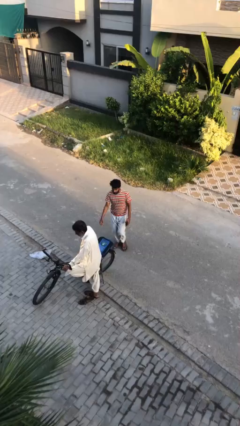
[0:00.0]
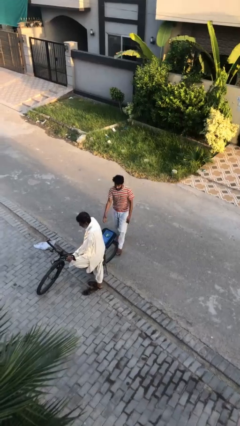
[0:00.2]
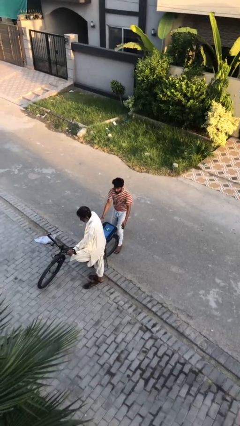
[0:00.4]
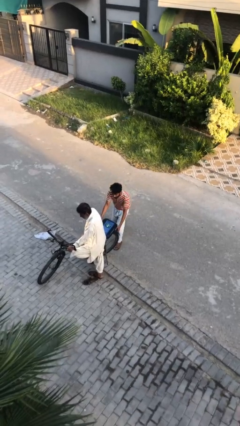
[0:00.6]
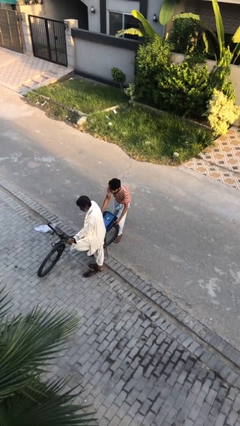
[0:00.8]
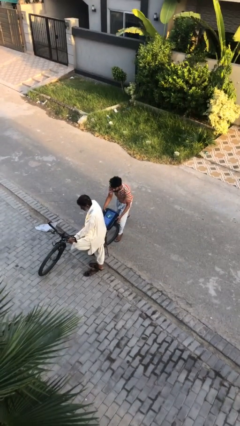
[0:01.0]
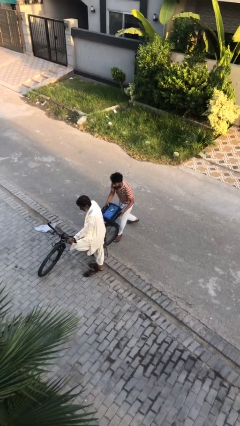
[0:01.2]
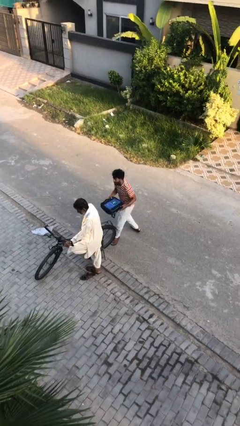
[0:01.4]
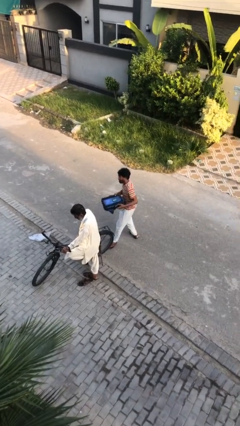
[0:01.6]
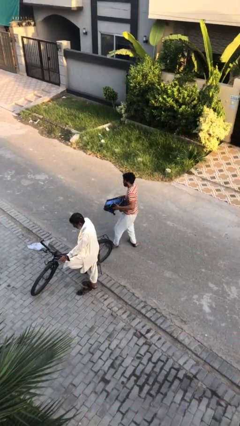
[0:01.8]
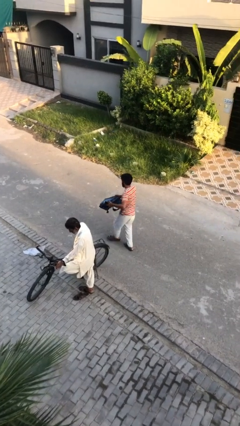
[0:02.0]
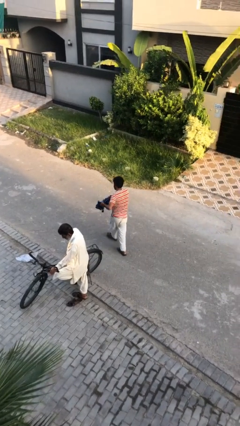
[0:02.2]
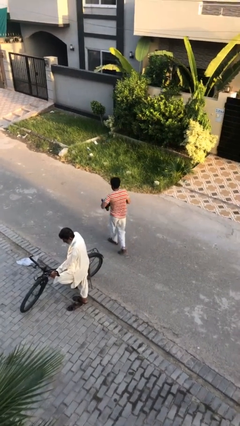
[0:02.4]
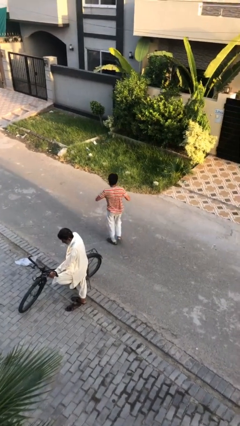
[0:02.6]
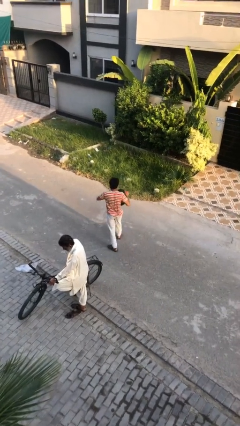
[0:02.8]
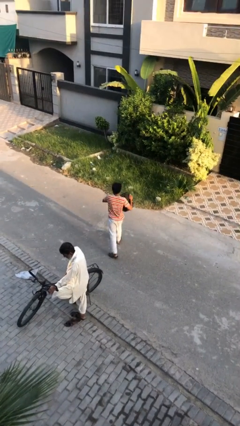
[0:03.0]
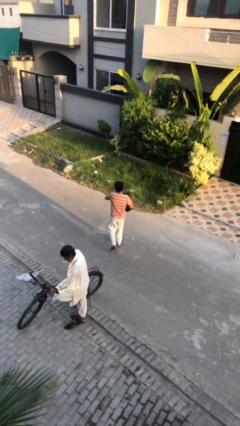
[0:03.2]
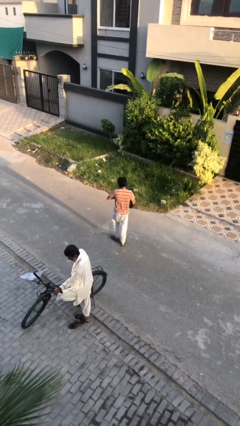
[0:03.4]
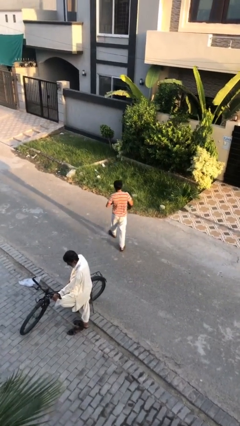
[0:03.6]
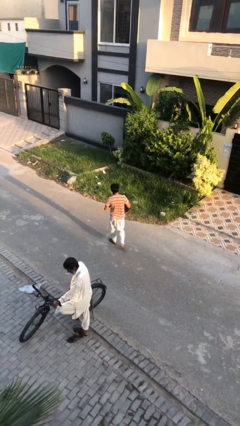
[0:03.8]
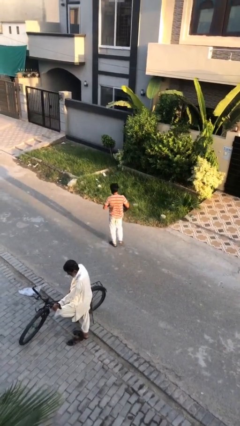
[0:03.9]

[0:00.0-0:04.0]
person steals object from person

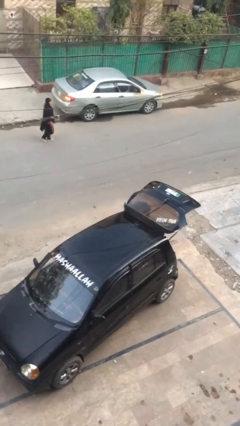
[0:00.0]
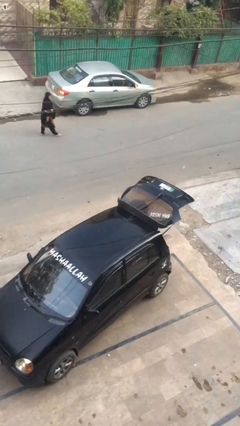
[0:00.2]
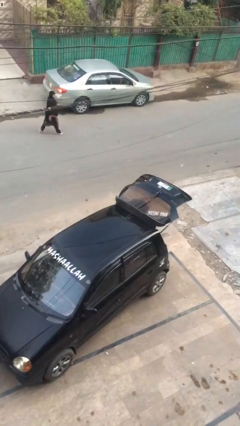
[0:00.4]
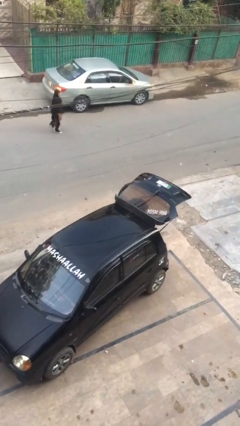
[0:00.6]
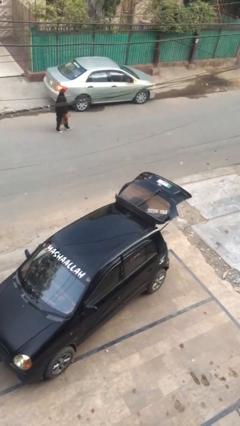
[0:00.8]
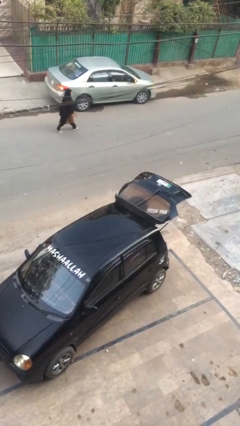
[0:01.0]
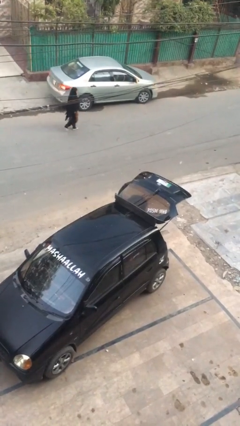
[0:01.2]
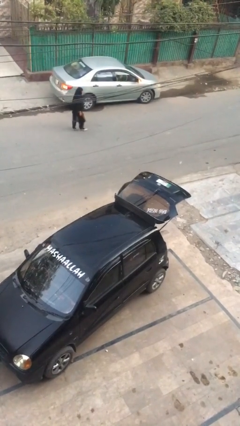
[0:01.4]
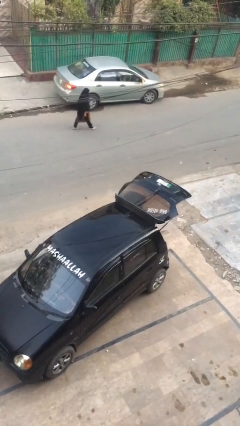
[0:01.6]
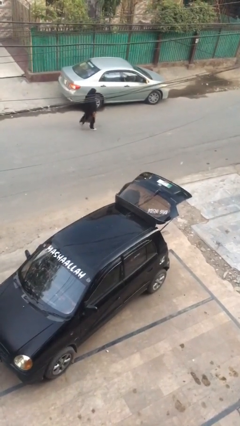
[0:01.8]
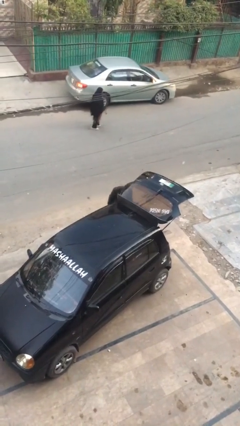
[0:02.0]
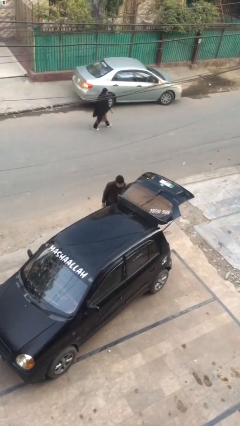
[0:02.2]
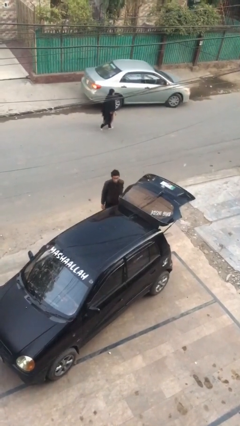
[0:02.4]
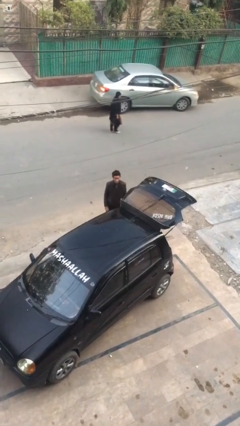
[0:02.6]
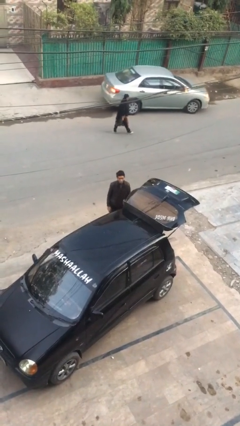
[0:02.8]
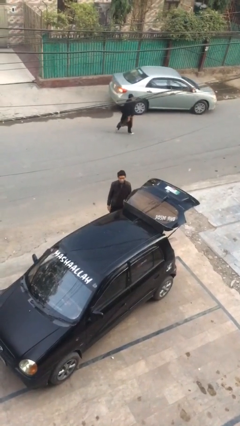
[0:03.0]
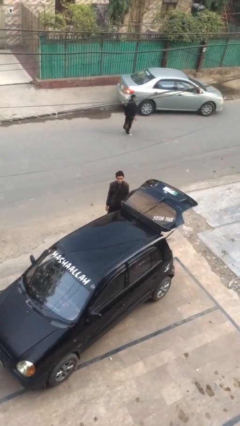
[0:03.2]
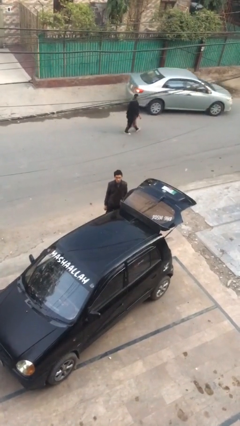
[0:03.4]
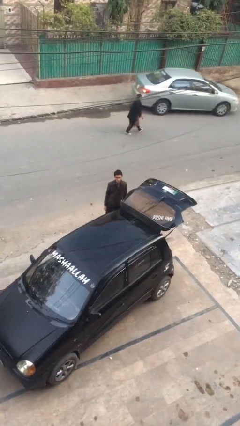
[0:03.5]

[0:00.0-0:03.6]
person loads car

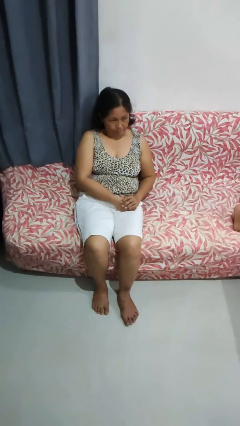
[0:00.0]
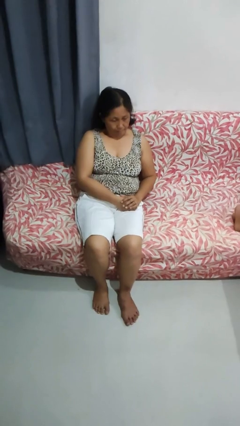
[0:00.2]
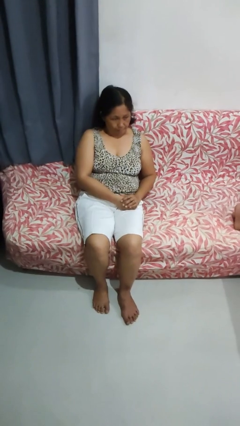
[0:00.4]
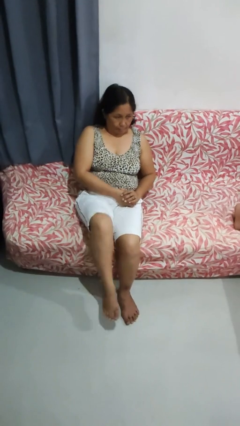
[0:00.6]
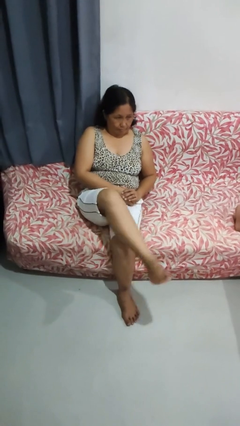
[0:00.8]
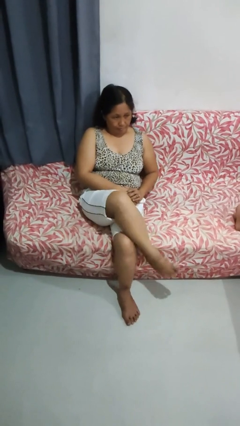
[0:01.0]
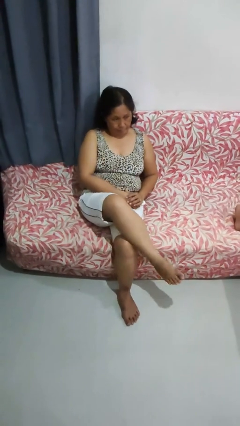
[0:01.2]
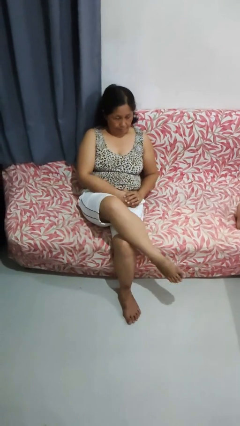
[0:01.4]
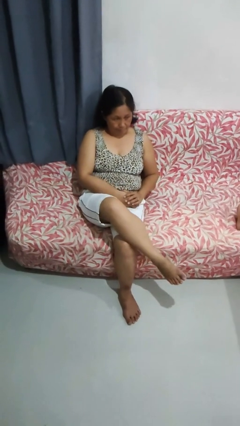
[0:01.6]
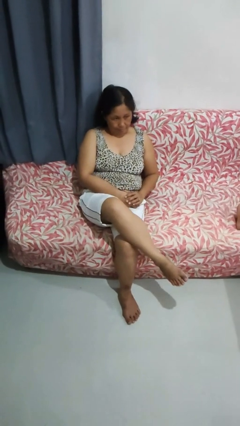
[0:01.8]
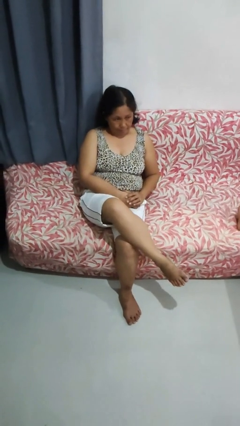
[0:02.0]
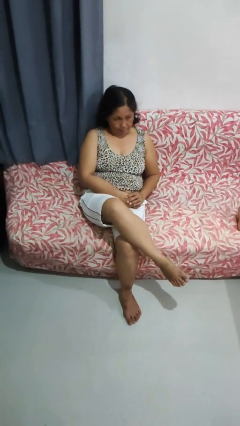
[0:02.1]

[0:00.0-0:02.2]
person crosses legs

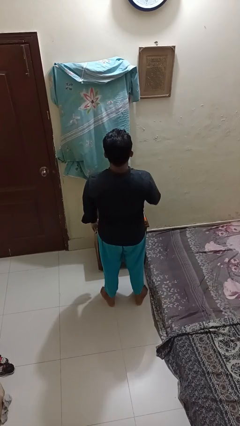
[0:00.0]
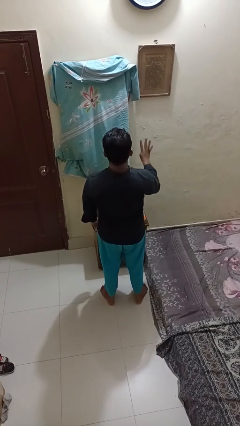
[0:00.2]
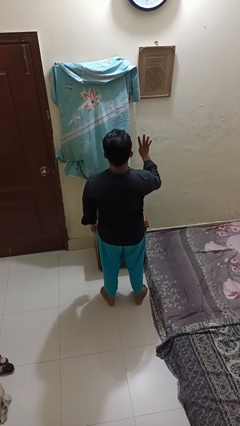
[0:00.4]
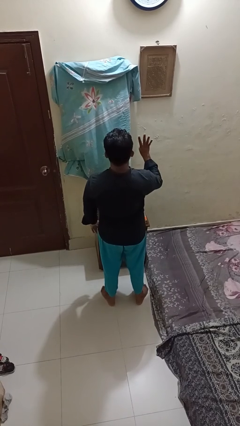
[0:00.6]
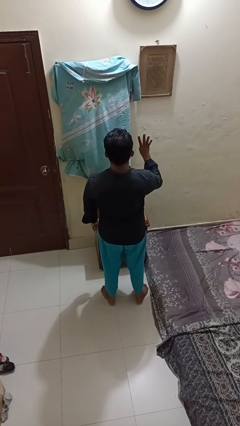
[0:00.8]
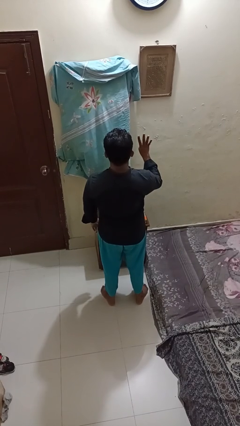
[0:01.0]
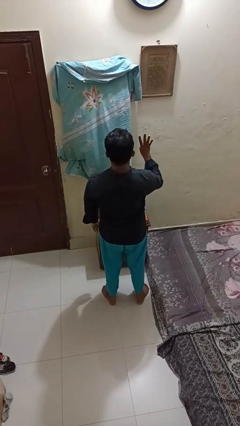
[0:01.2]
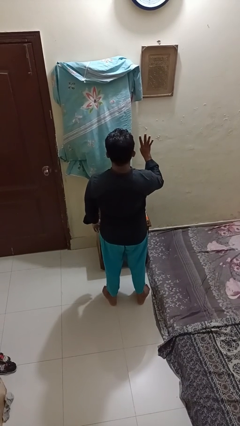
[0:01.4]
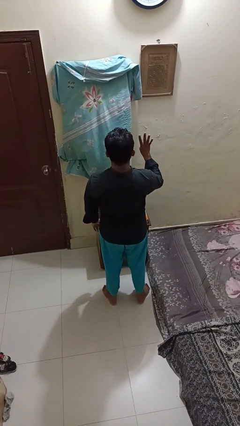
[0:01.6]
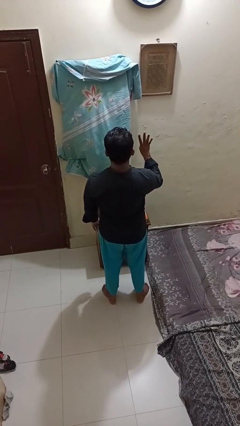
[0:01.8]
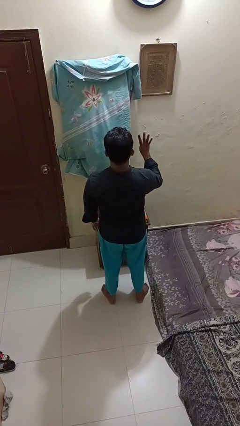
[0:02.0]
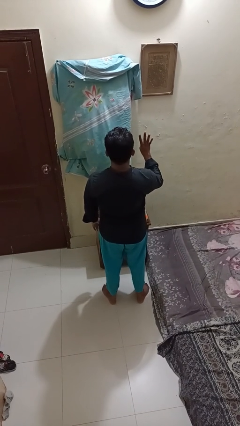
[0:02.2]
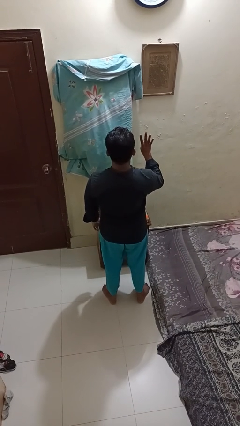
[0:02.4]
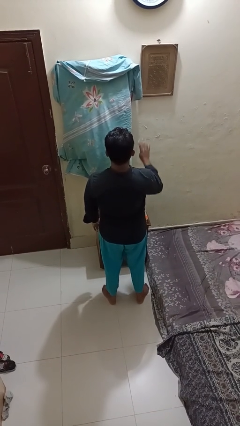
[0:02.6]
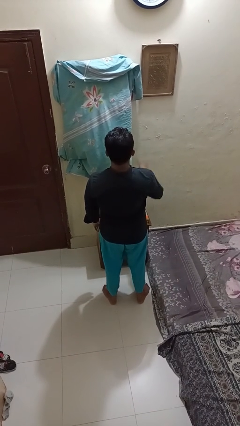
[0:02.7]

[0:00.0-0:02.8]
person gestures number four

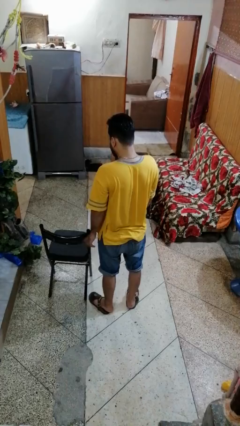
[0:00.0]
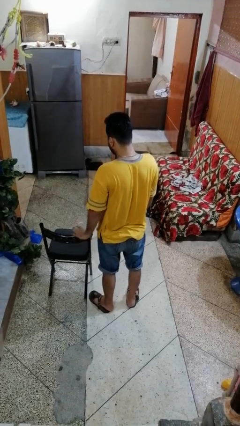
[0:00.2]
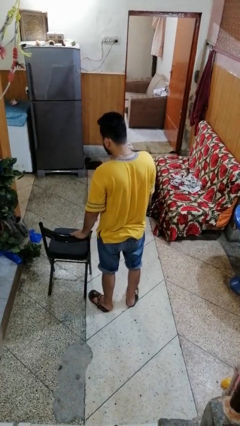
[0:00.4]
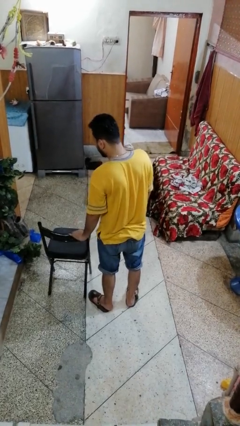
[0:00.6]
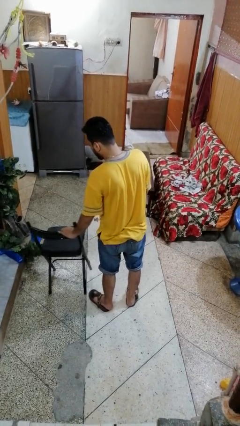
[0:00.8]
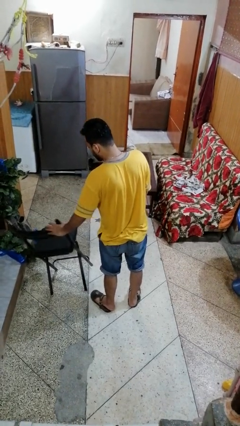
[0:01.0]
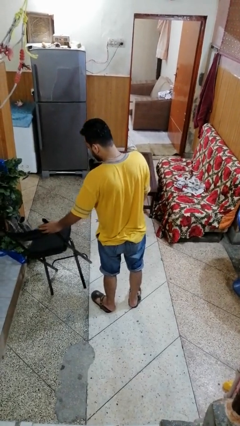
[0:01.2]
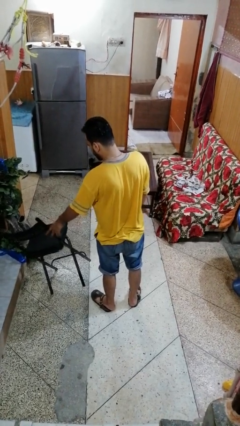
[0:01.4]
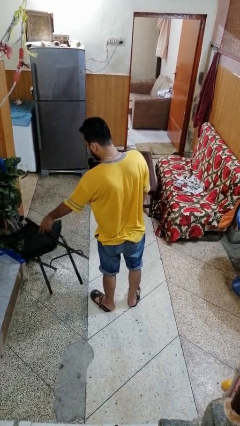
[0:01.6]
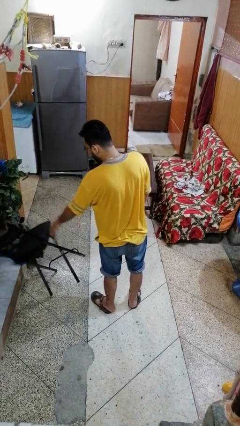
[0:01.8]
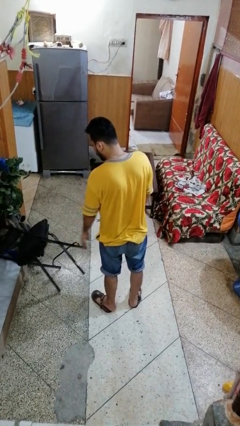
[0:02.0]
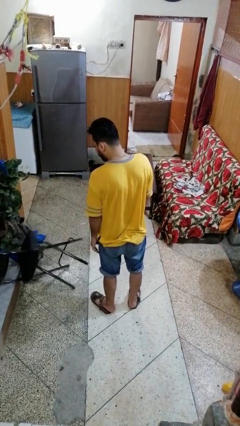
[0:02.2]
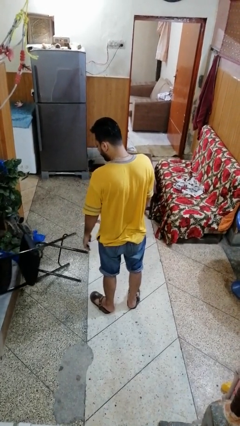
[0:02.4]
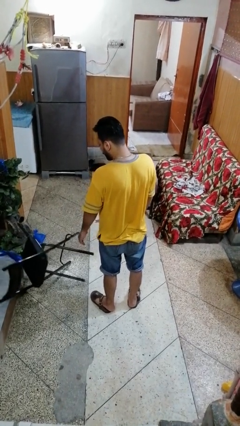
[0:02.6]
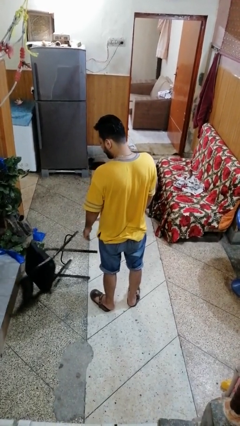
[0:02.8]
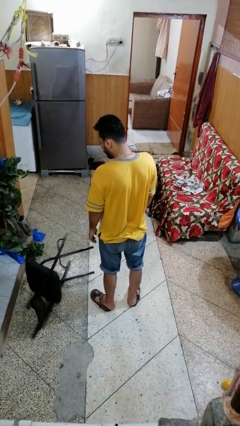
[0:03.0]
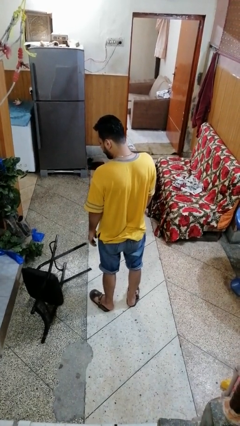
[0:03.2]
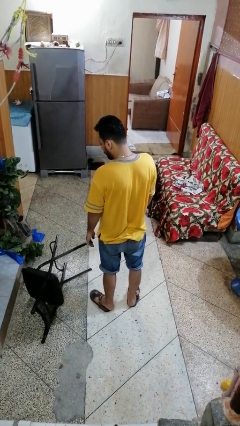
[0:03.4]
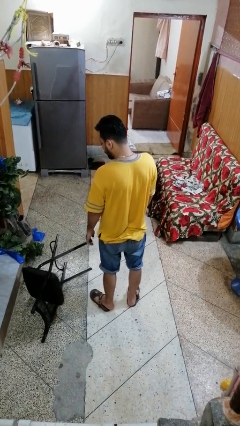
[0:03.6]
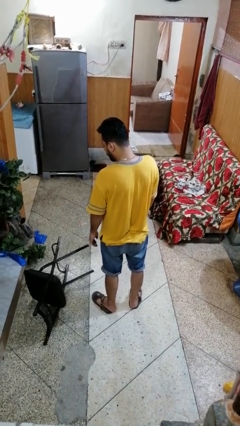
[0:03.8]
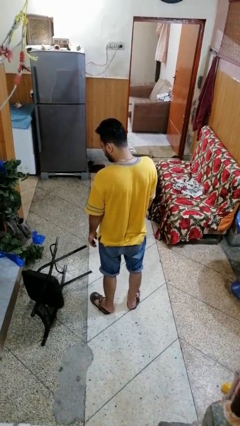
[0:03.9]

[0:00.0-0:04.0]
person knocks over furniture

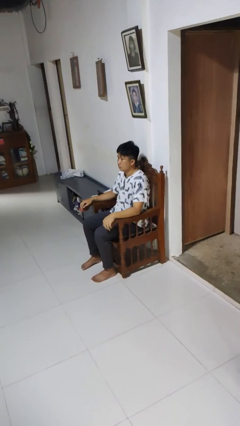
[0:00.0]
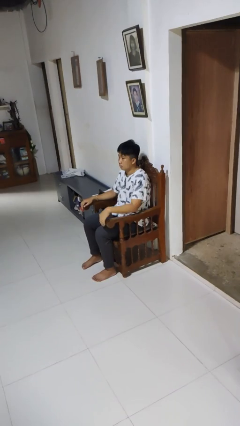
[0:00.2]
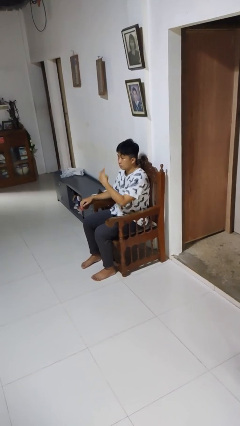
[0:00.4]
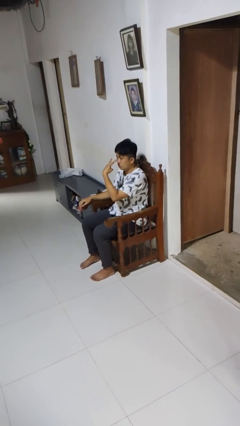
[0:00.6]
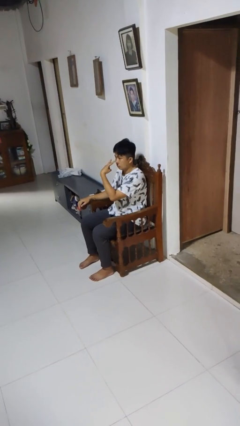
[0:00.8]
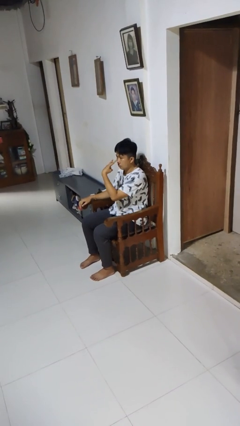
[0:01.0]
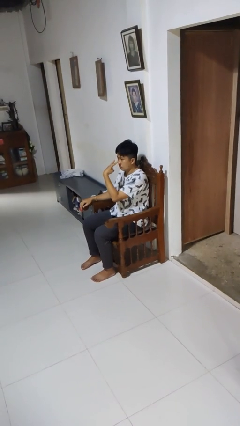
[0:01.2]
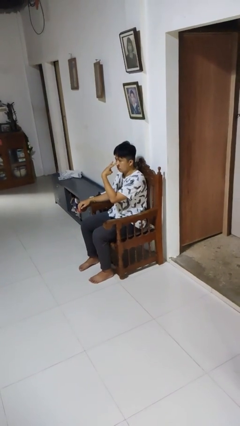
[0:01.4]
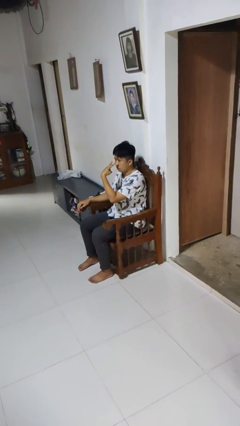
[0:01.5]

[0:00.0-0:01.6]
person gestures watch closely
